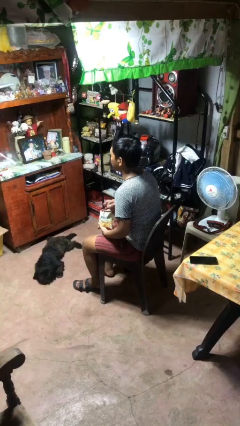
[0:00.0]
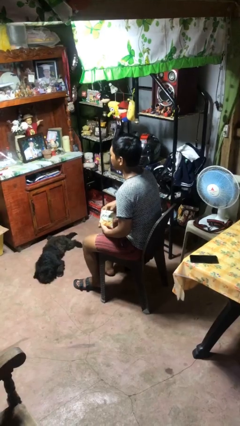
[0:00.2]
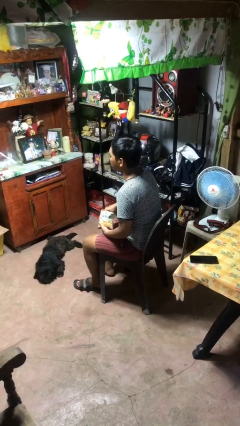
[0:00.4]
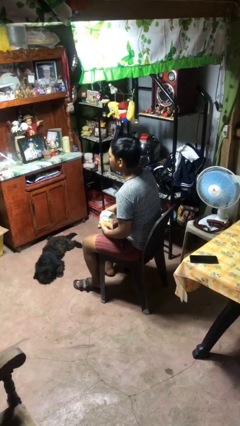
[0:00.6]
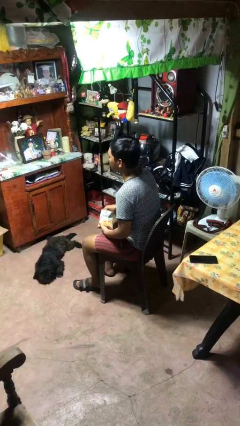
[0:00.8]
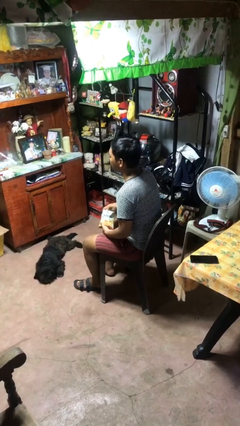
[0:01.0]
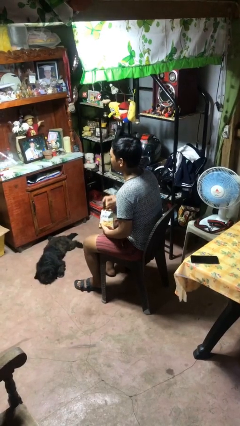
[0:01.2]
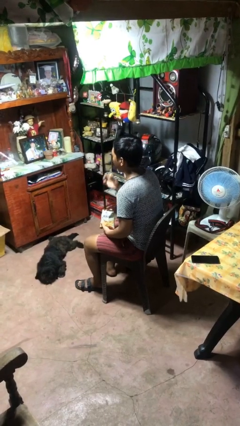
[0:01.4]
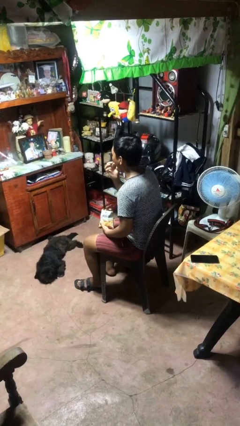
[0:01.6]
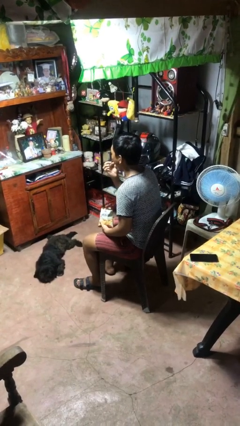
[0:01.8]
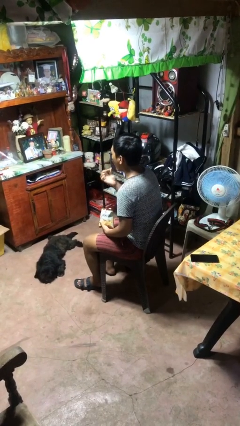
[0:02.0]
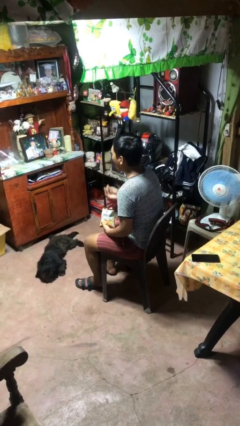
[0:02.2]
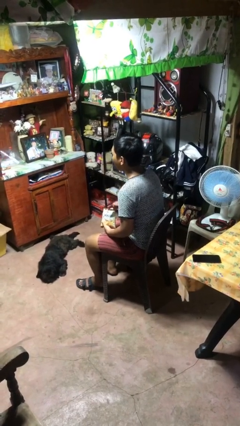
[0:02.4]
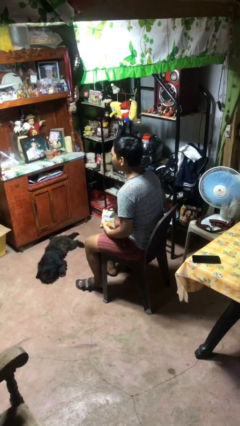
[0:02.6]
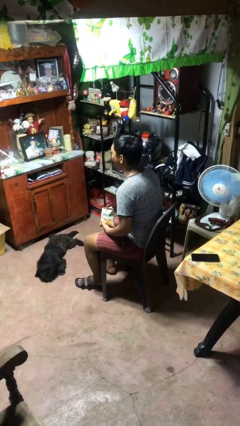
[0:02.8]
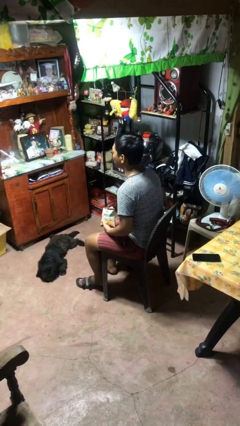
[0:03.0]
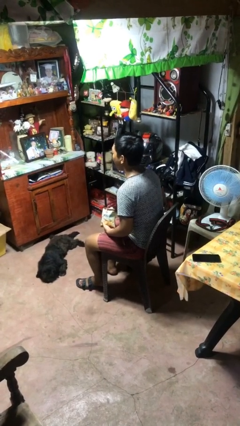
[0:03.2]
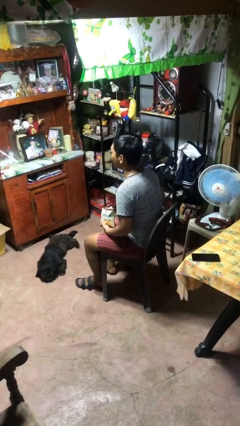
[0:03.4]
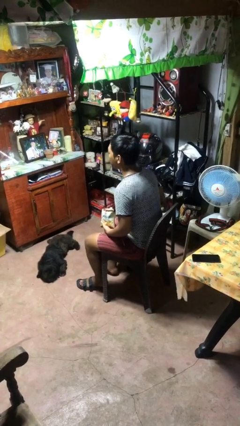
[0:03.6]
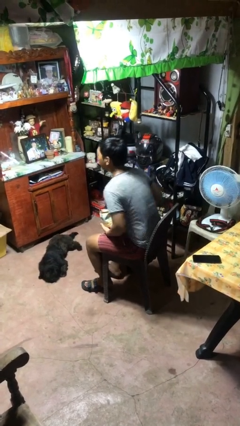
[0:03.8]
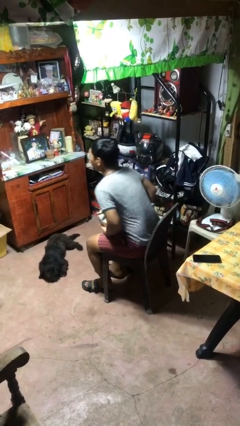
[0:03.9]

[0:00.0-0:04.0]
person eats snack from bag

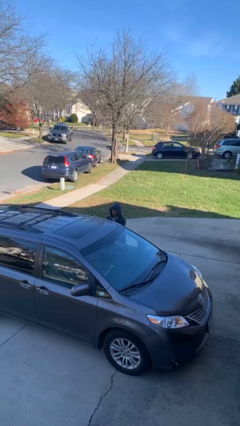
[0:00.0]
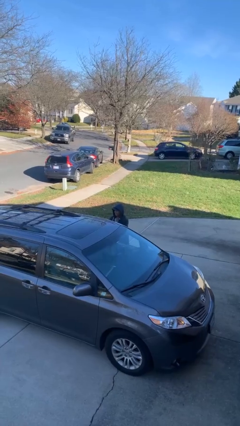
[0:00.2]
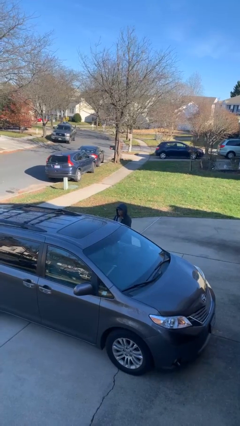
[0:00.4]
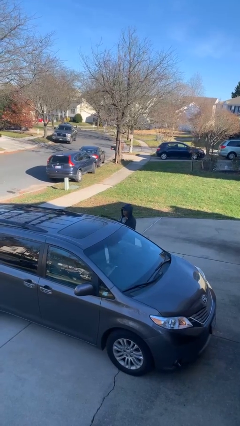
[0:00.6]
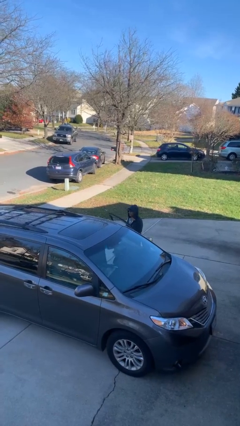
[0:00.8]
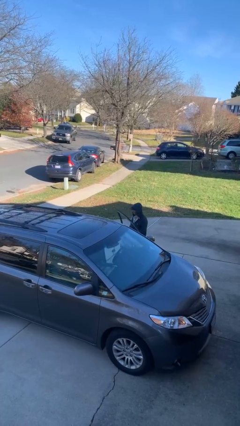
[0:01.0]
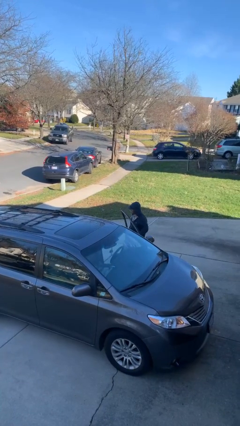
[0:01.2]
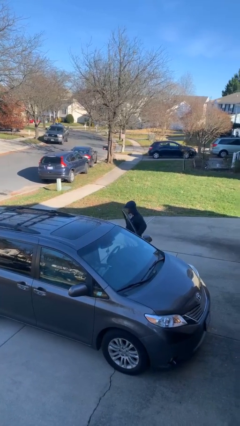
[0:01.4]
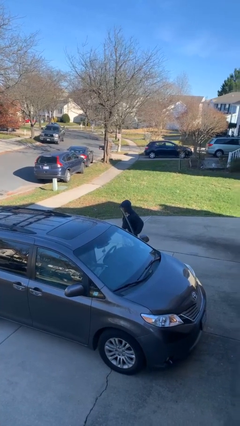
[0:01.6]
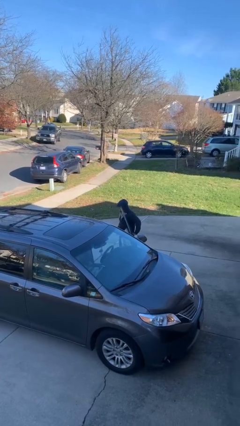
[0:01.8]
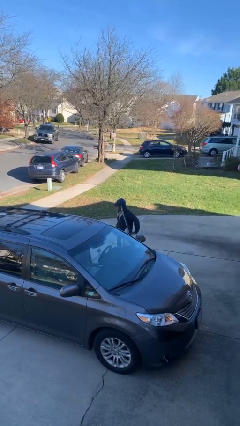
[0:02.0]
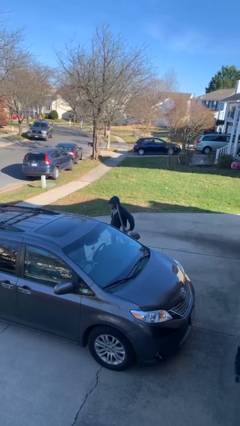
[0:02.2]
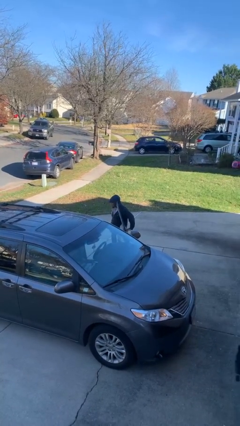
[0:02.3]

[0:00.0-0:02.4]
person opens car door

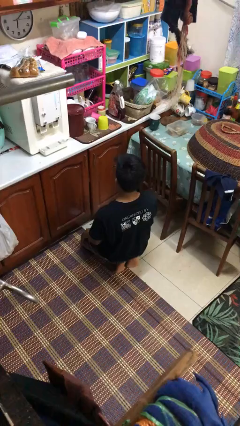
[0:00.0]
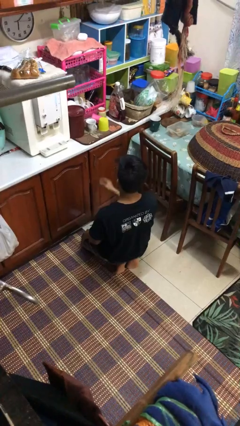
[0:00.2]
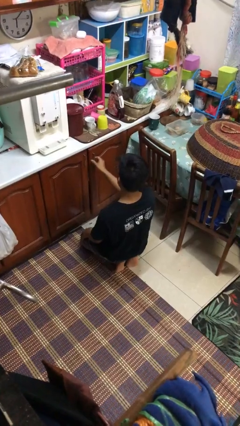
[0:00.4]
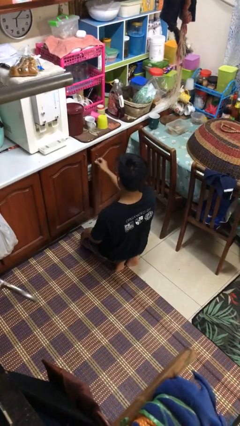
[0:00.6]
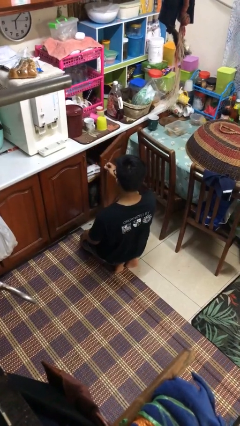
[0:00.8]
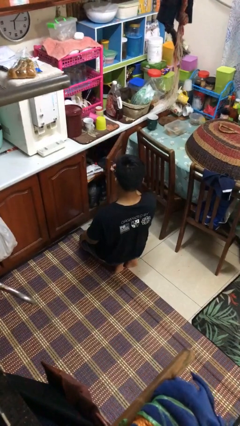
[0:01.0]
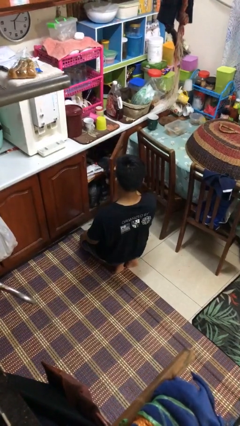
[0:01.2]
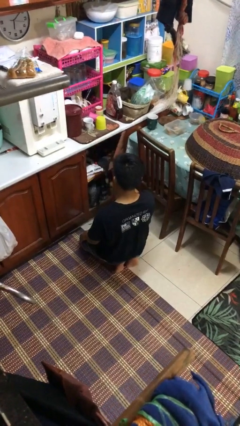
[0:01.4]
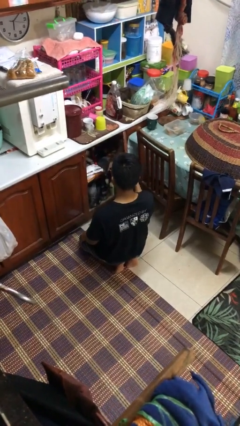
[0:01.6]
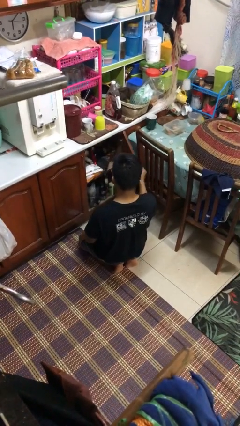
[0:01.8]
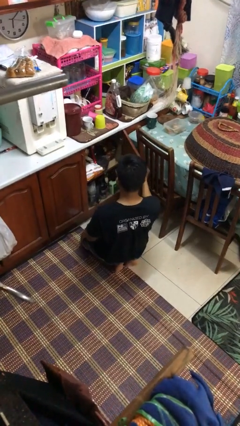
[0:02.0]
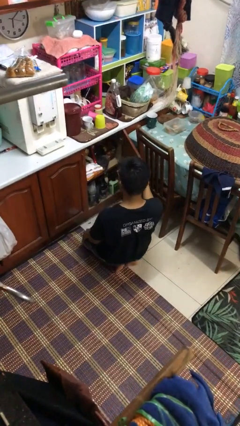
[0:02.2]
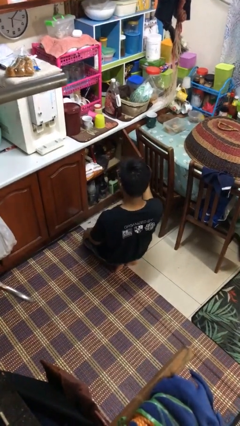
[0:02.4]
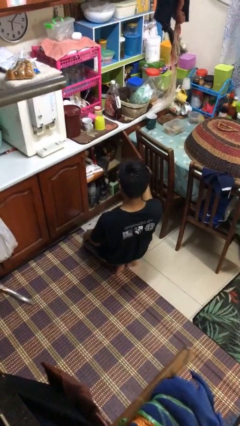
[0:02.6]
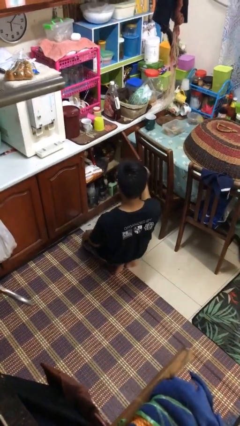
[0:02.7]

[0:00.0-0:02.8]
person opens kitchen drawer

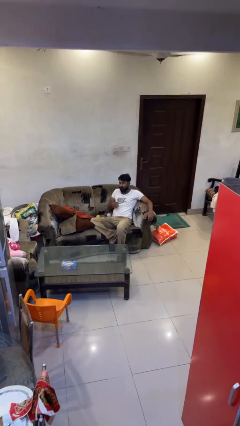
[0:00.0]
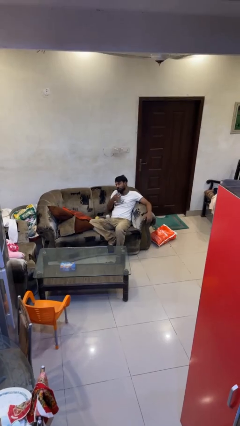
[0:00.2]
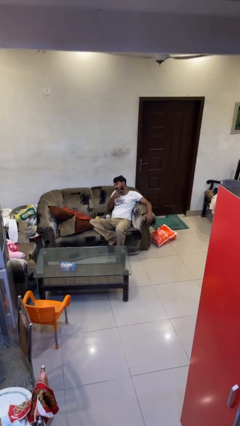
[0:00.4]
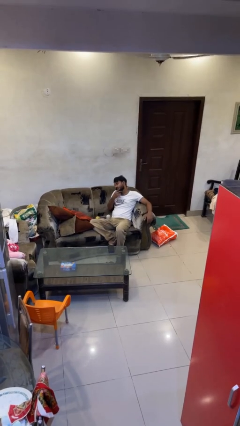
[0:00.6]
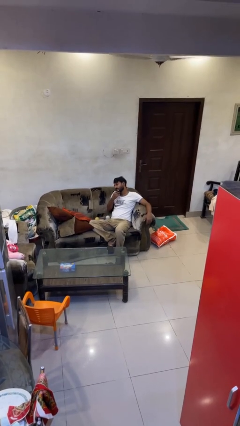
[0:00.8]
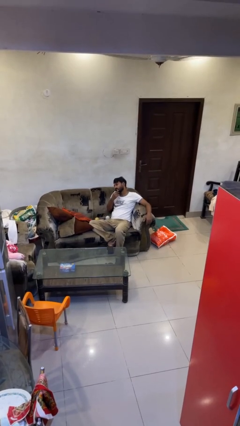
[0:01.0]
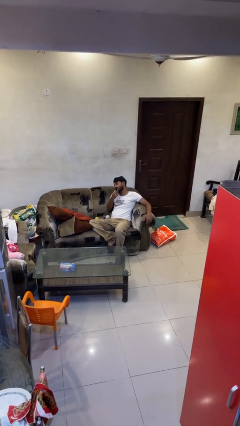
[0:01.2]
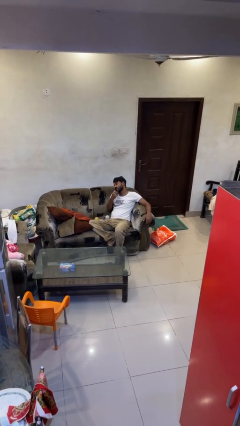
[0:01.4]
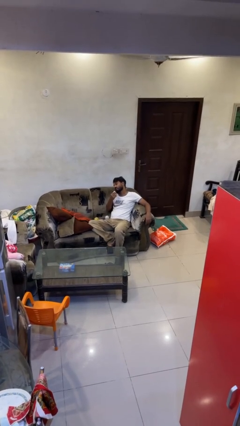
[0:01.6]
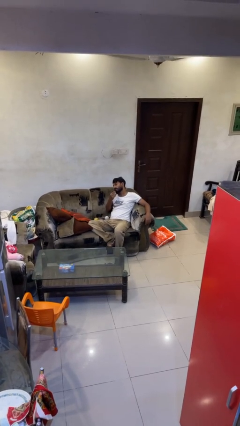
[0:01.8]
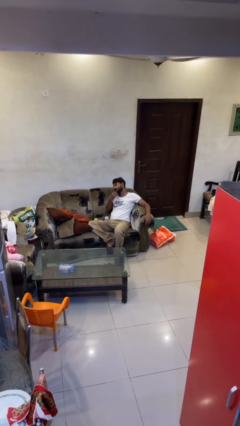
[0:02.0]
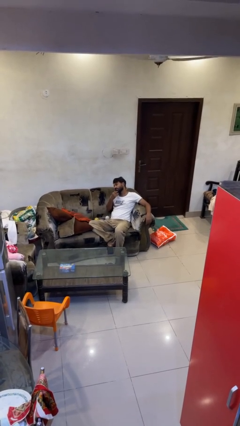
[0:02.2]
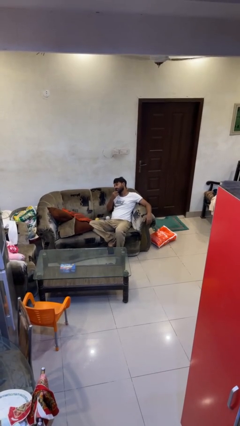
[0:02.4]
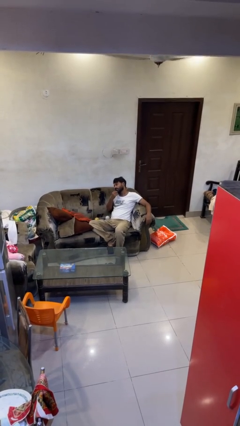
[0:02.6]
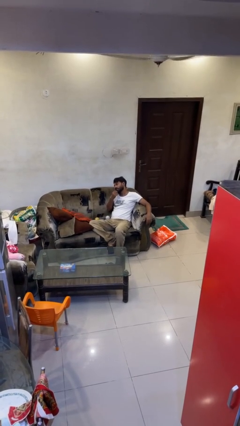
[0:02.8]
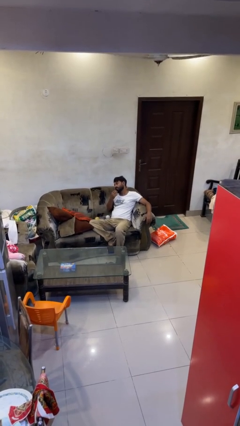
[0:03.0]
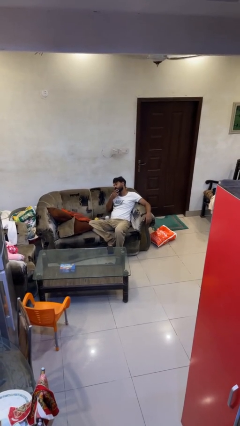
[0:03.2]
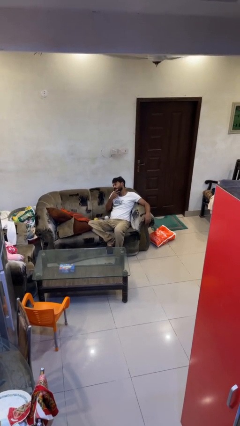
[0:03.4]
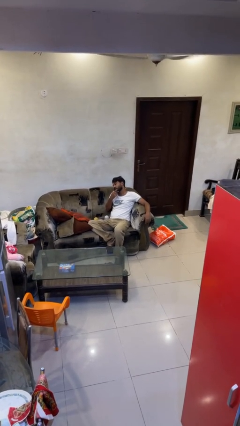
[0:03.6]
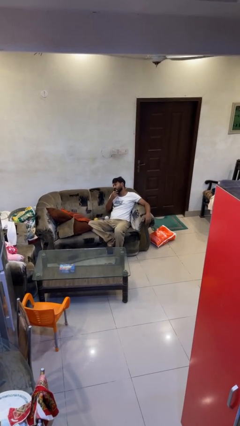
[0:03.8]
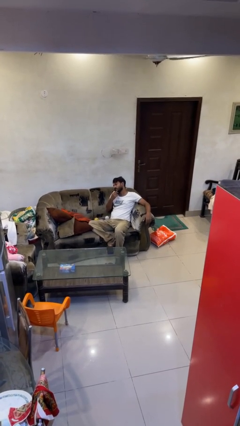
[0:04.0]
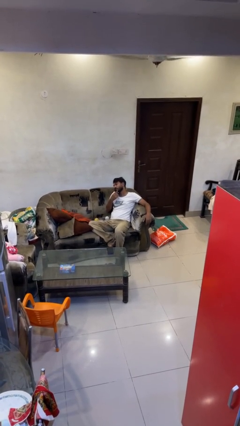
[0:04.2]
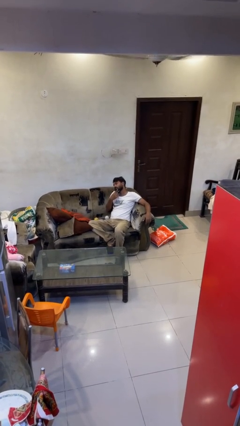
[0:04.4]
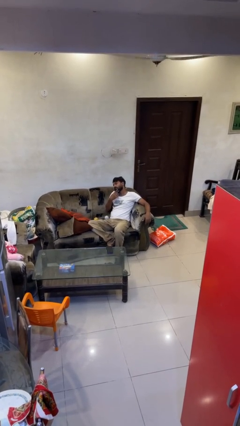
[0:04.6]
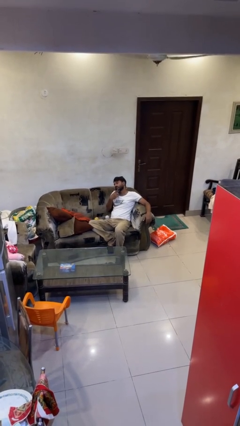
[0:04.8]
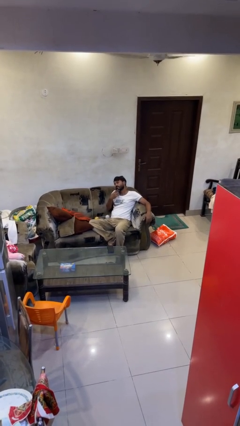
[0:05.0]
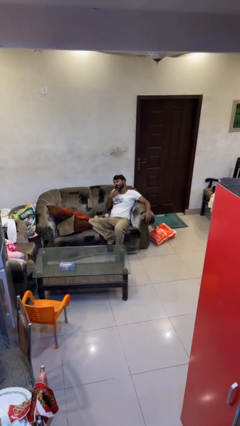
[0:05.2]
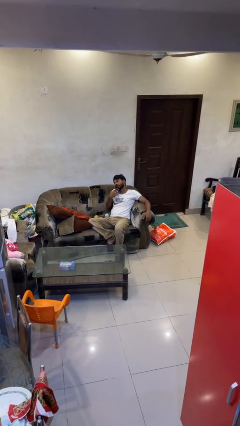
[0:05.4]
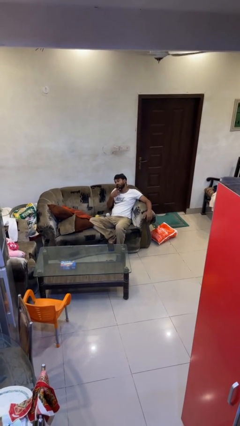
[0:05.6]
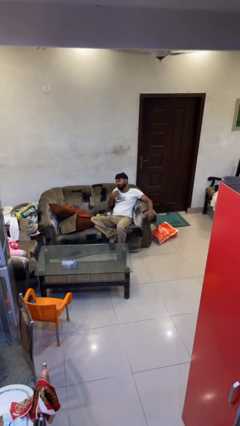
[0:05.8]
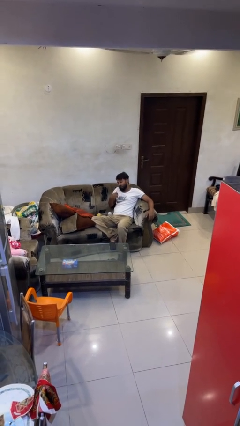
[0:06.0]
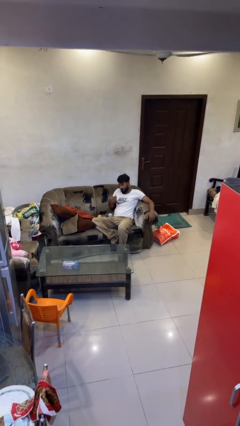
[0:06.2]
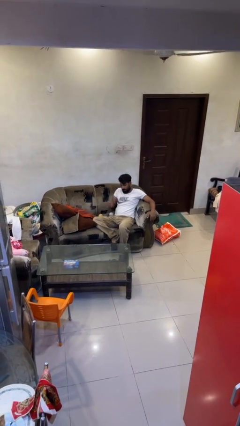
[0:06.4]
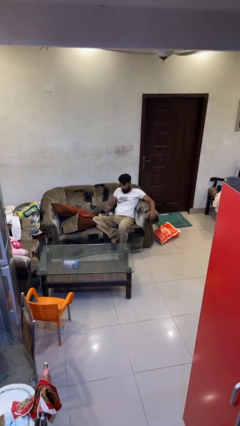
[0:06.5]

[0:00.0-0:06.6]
person strokes chin

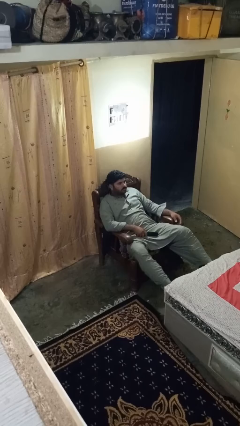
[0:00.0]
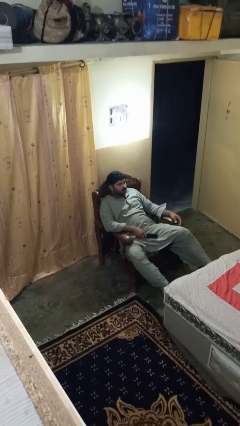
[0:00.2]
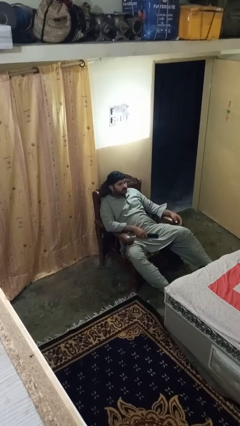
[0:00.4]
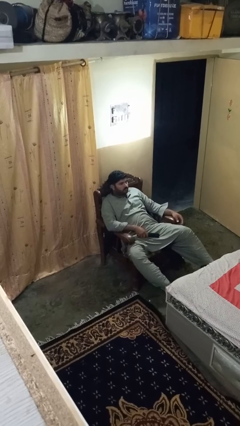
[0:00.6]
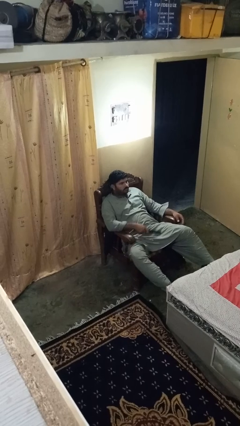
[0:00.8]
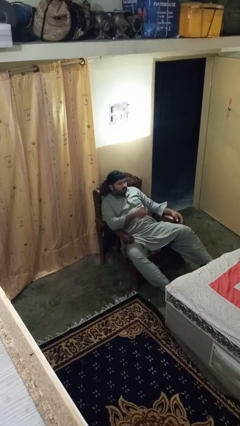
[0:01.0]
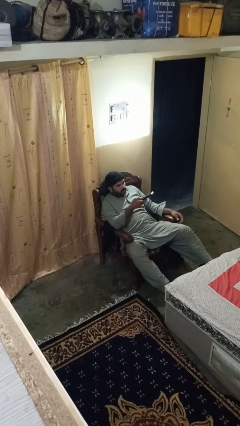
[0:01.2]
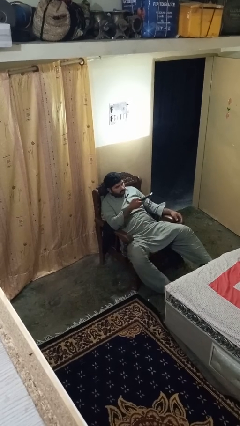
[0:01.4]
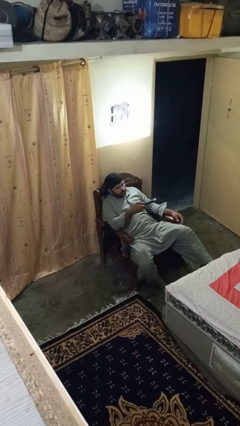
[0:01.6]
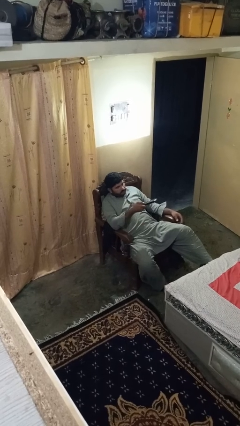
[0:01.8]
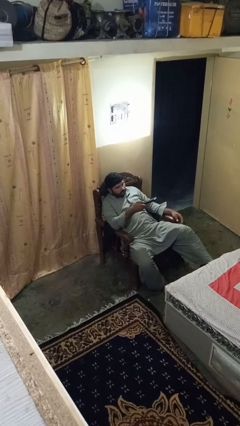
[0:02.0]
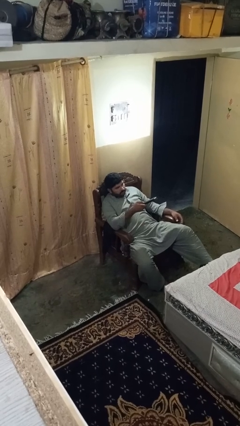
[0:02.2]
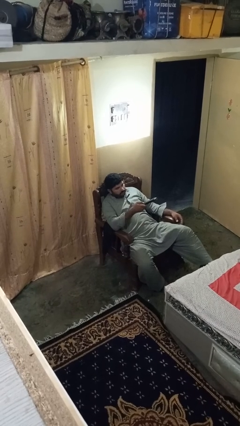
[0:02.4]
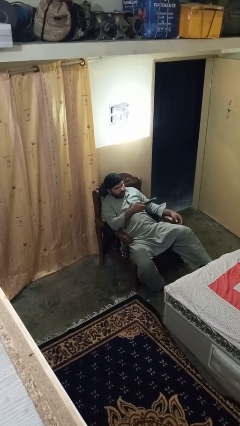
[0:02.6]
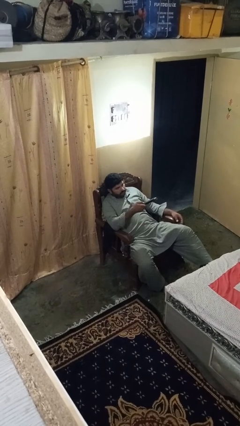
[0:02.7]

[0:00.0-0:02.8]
person uses television remote
